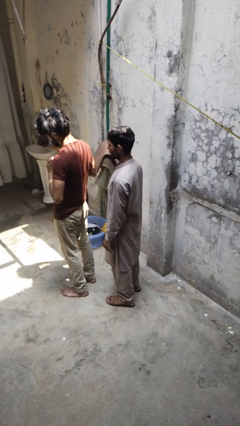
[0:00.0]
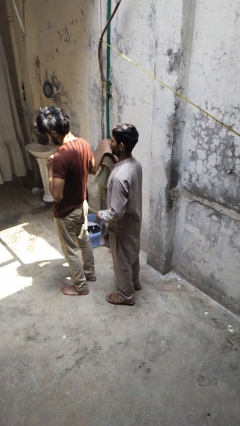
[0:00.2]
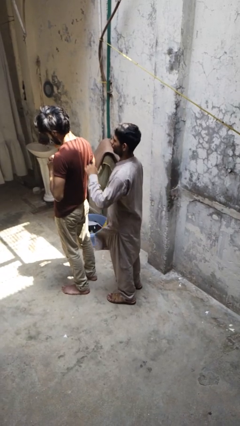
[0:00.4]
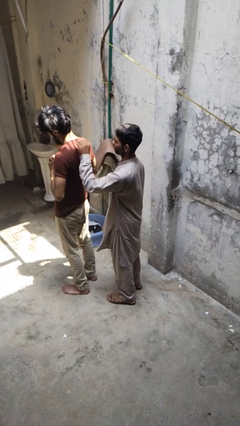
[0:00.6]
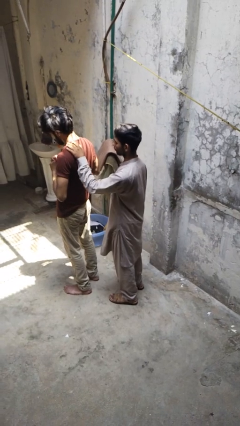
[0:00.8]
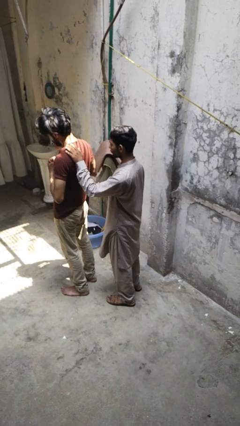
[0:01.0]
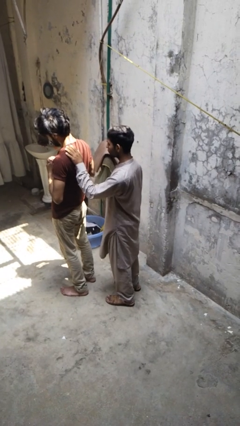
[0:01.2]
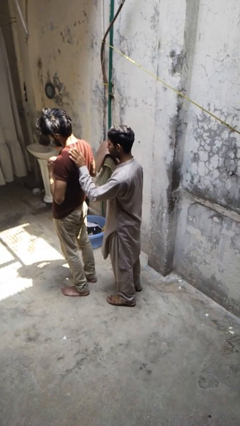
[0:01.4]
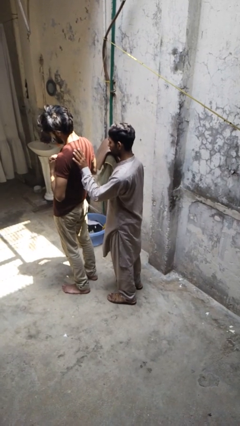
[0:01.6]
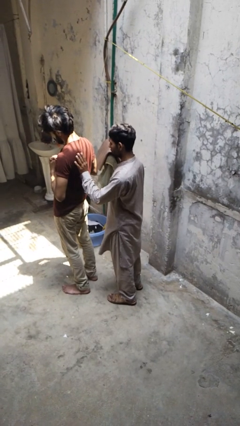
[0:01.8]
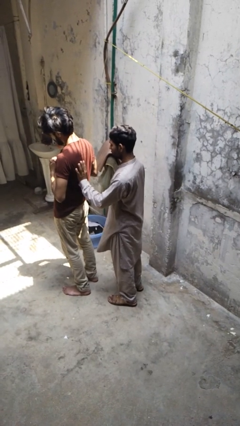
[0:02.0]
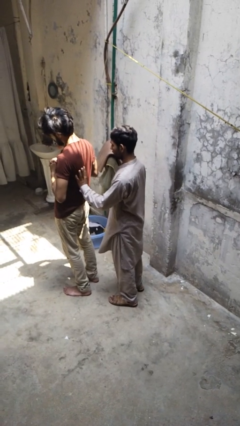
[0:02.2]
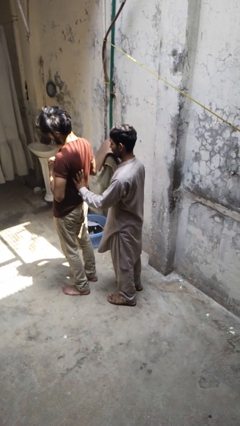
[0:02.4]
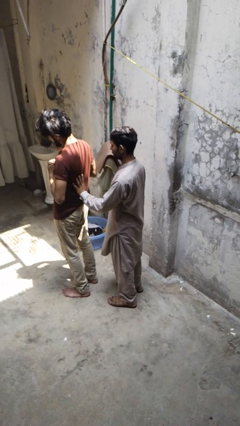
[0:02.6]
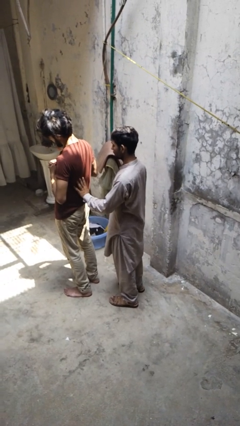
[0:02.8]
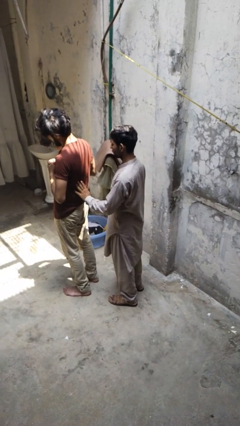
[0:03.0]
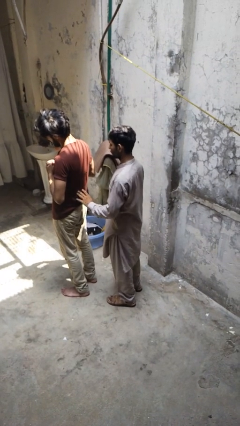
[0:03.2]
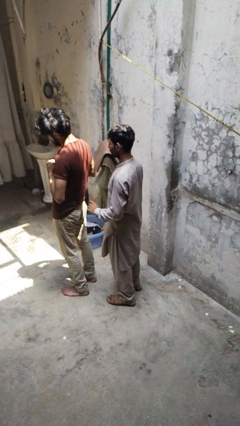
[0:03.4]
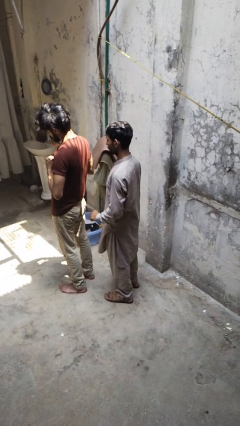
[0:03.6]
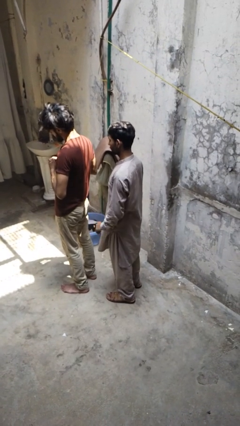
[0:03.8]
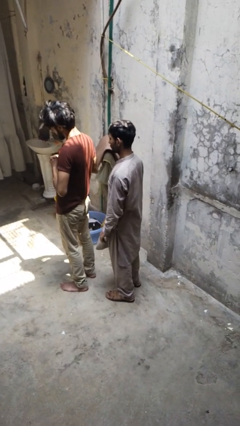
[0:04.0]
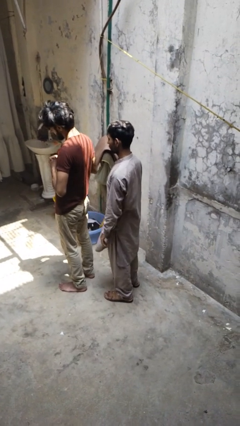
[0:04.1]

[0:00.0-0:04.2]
person touches back of person

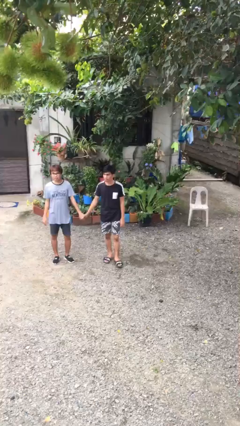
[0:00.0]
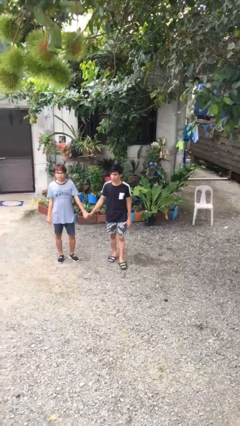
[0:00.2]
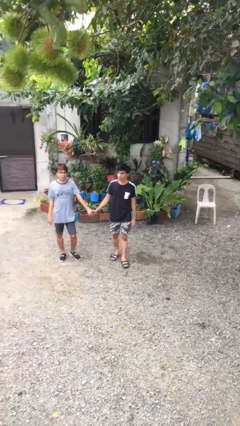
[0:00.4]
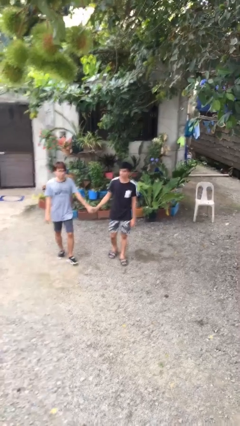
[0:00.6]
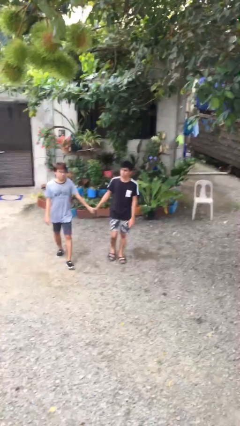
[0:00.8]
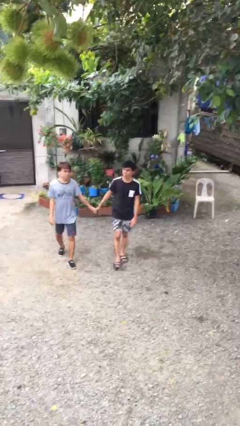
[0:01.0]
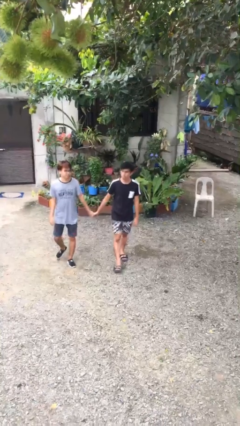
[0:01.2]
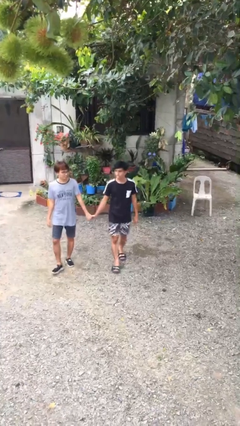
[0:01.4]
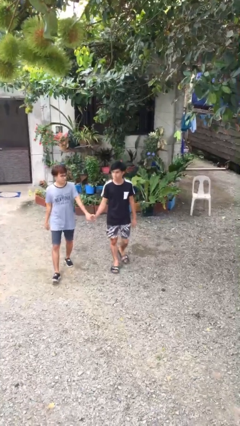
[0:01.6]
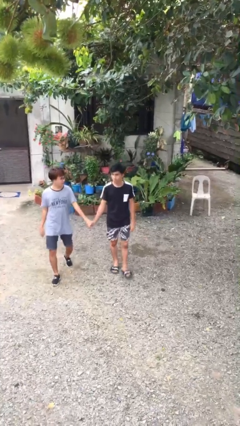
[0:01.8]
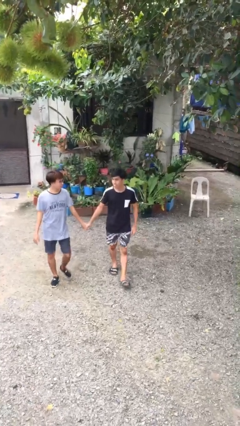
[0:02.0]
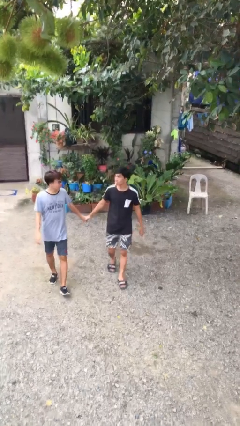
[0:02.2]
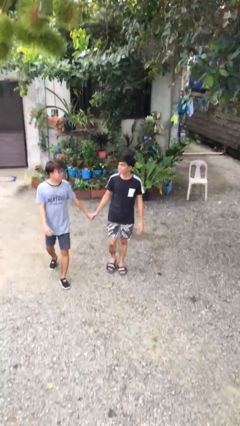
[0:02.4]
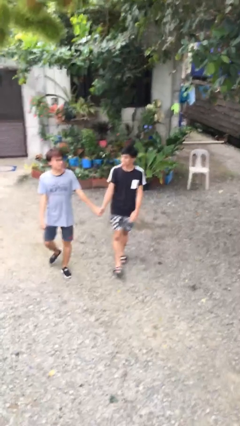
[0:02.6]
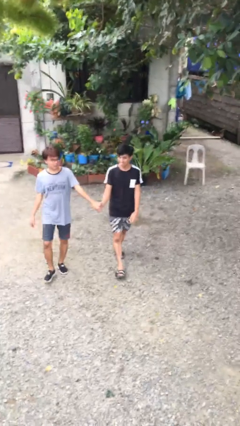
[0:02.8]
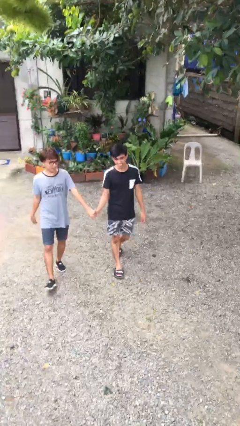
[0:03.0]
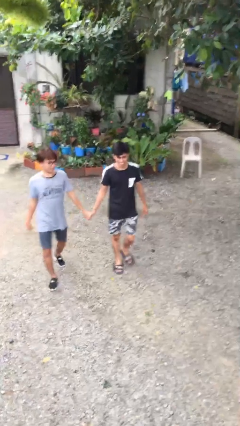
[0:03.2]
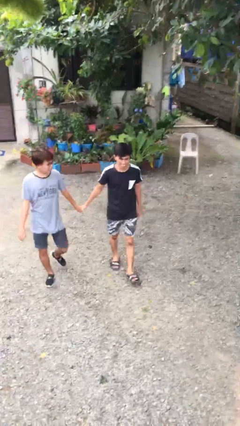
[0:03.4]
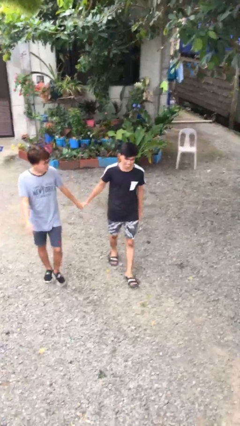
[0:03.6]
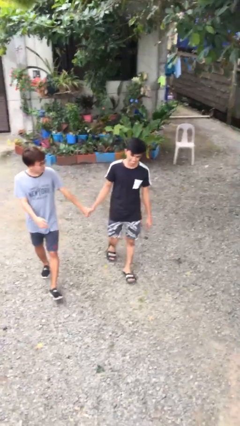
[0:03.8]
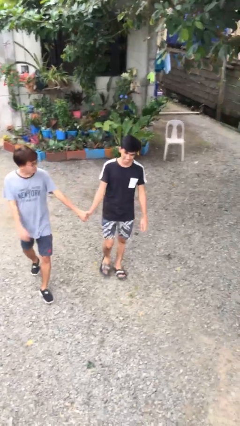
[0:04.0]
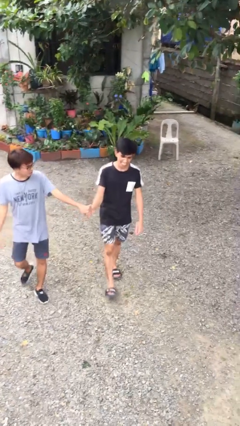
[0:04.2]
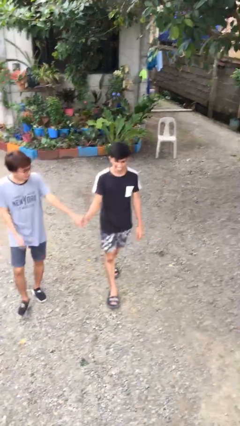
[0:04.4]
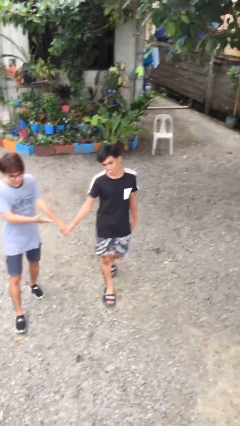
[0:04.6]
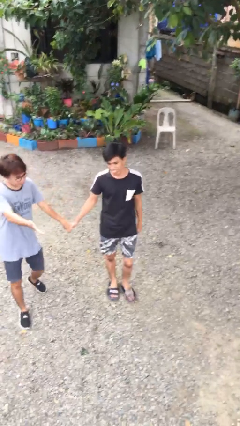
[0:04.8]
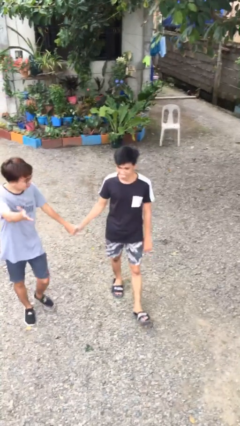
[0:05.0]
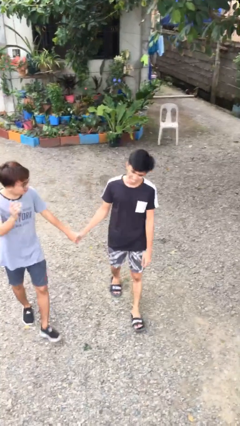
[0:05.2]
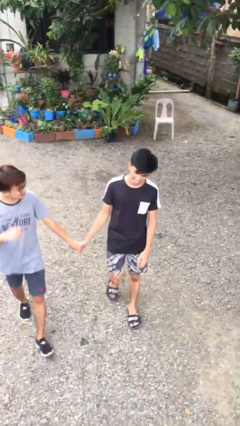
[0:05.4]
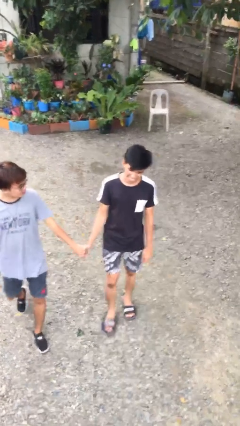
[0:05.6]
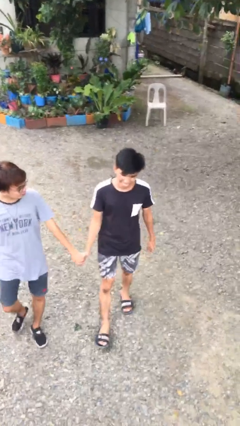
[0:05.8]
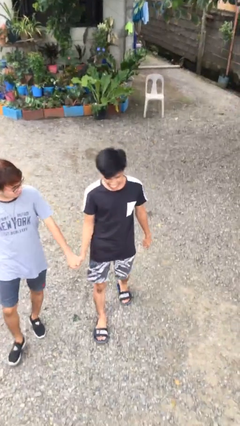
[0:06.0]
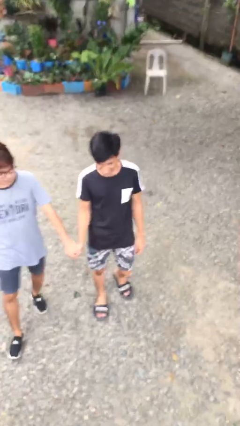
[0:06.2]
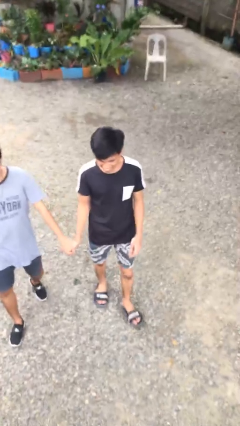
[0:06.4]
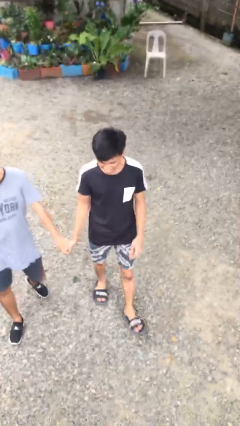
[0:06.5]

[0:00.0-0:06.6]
person holds hand

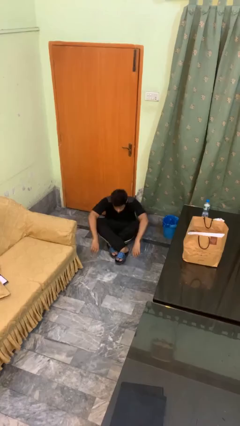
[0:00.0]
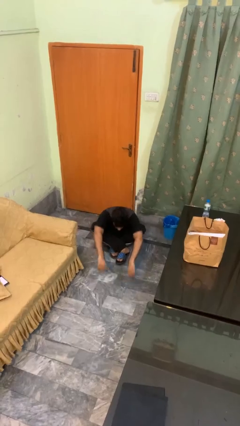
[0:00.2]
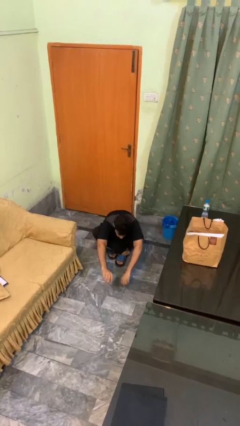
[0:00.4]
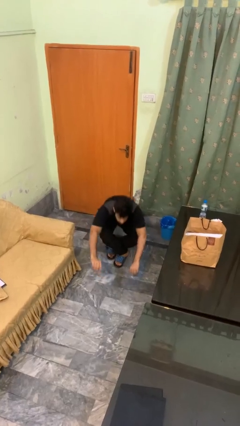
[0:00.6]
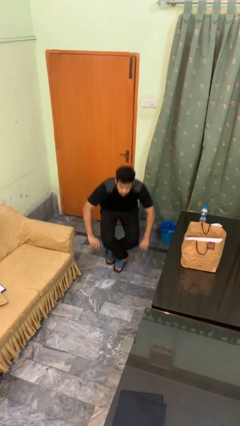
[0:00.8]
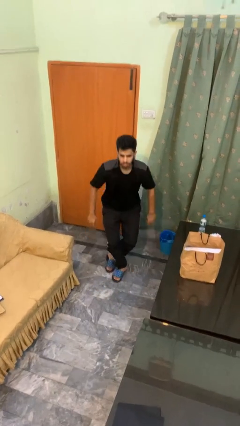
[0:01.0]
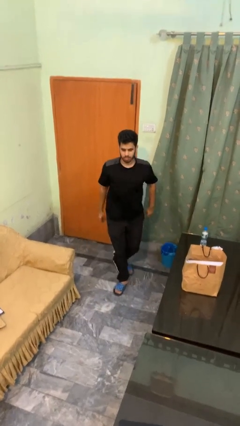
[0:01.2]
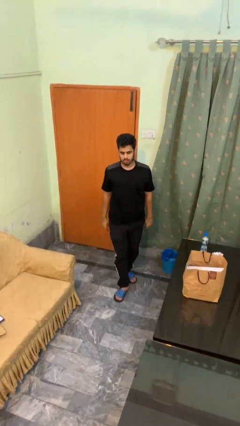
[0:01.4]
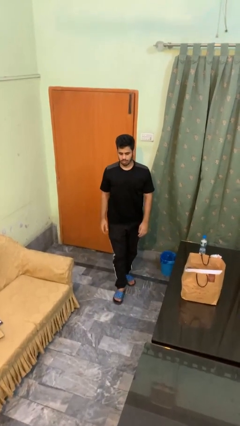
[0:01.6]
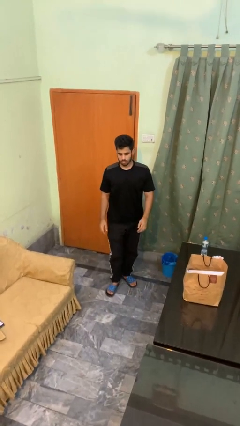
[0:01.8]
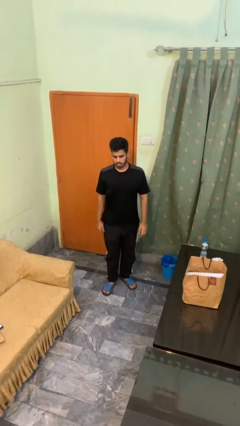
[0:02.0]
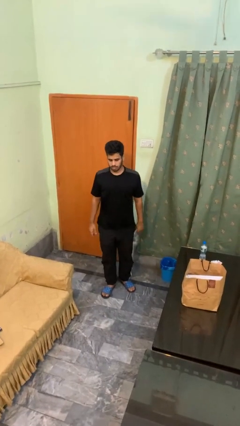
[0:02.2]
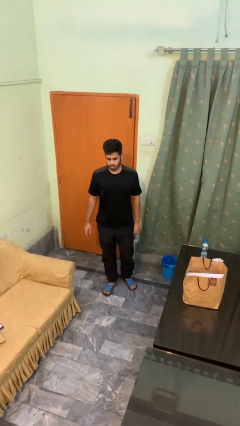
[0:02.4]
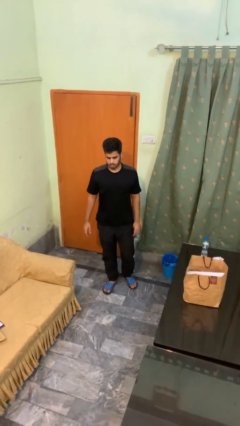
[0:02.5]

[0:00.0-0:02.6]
person stands up from floor

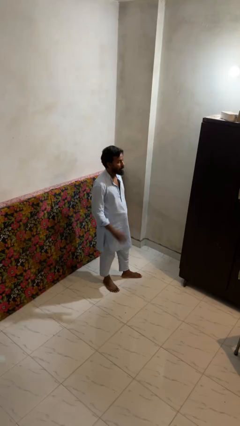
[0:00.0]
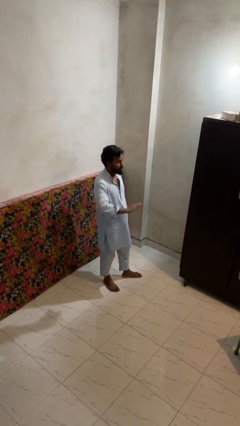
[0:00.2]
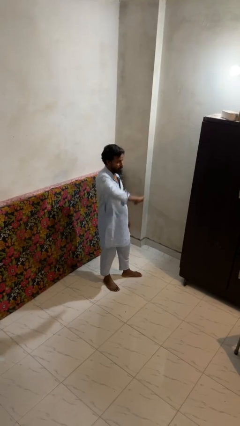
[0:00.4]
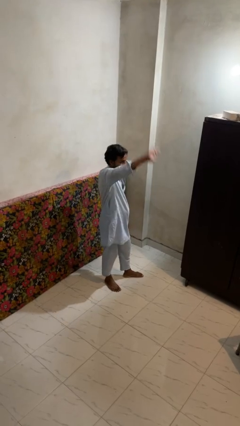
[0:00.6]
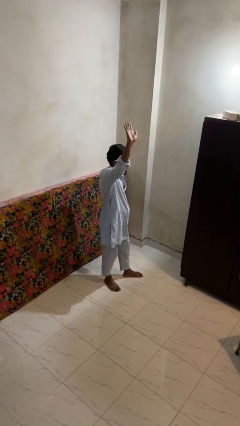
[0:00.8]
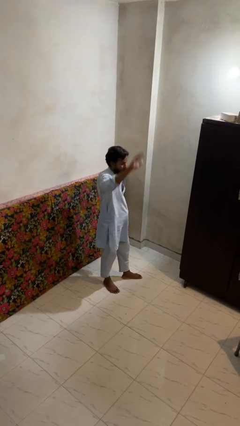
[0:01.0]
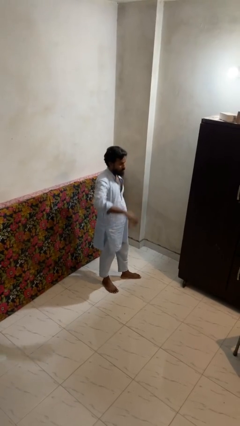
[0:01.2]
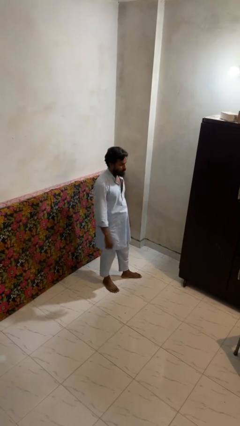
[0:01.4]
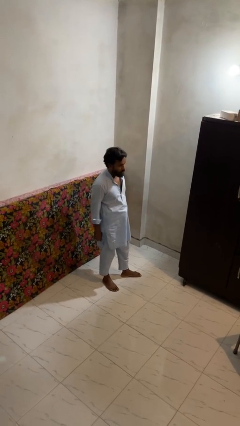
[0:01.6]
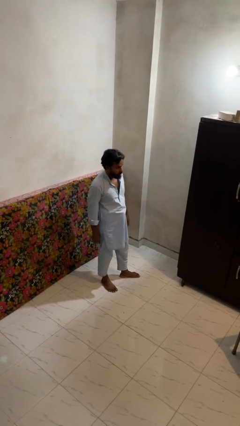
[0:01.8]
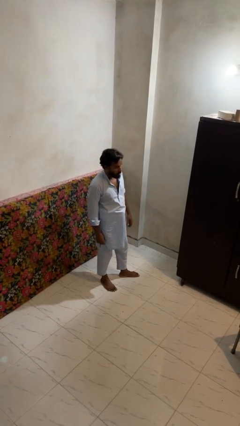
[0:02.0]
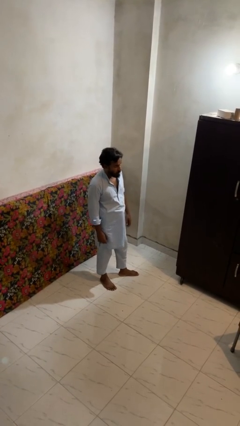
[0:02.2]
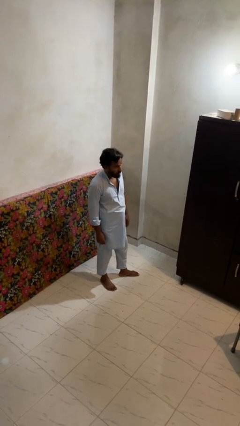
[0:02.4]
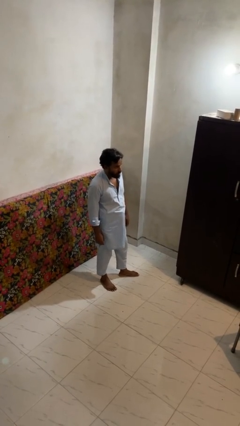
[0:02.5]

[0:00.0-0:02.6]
person gestures swipe up

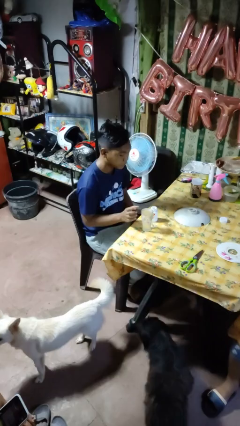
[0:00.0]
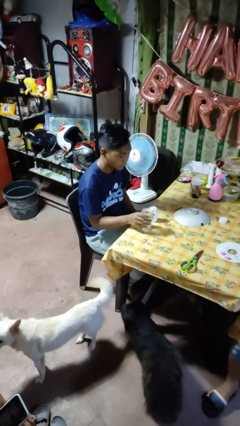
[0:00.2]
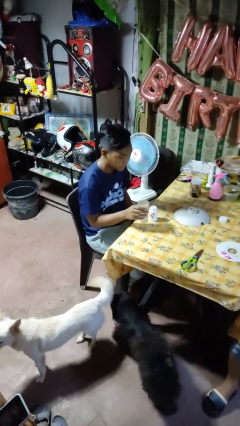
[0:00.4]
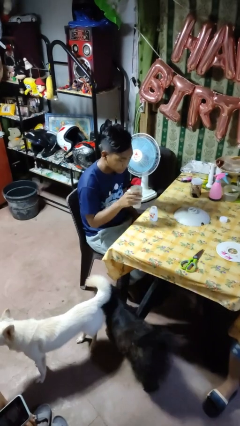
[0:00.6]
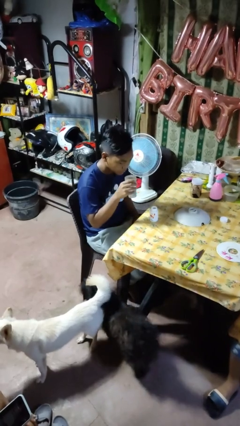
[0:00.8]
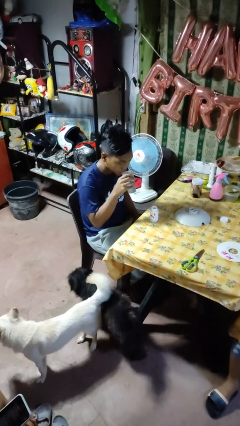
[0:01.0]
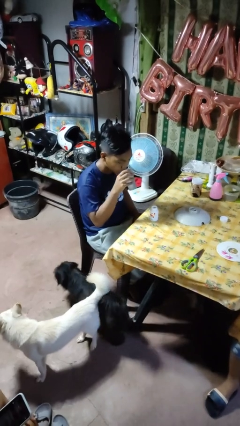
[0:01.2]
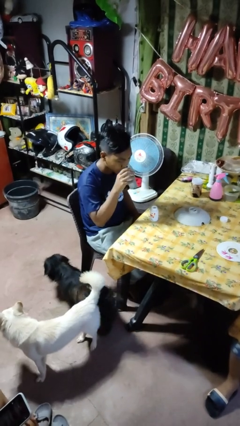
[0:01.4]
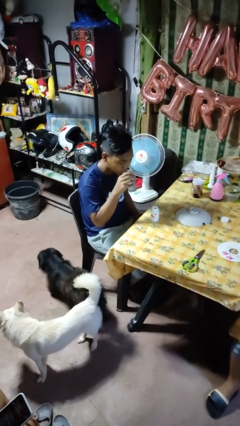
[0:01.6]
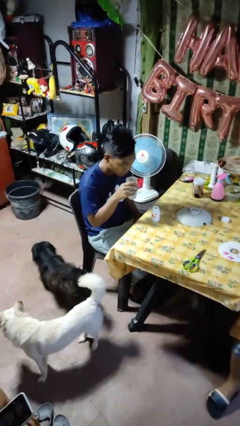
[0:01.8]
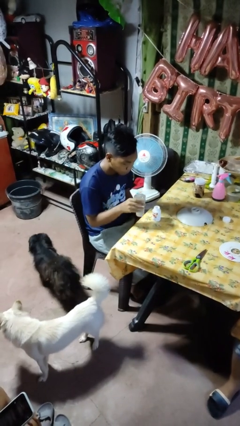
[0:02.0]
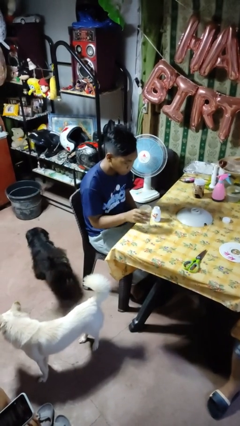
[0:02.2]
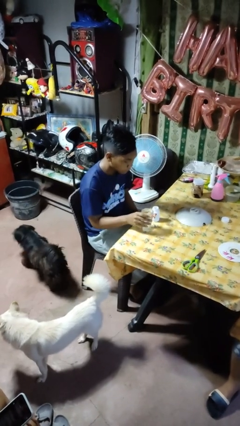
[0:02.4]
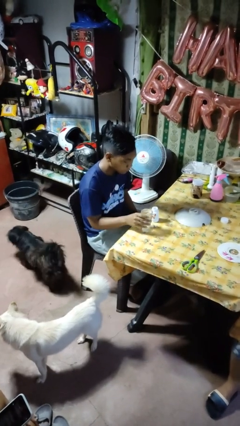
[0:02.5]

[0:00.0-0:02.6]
person drinks from cup
